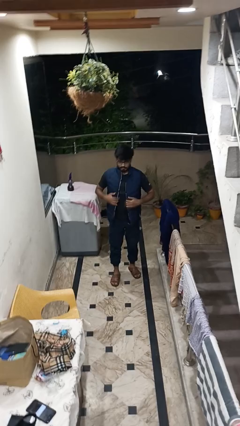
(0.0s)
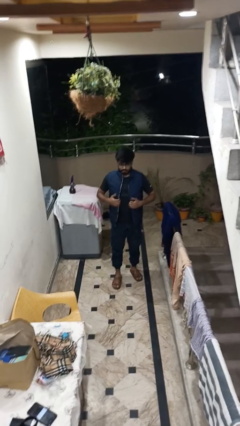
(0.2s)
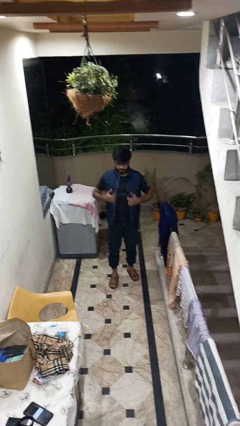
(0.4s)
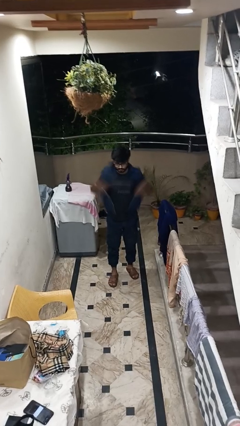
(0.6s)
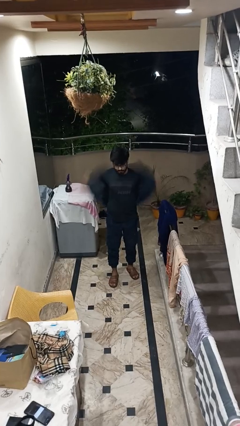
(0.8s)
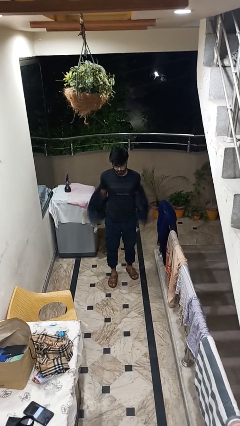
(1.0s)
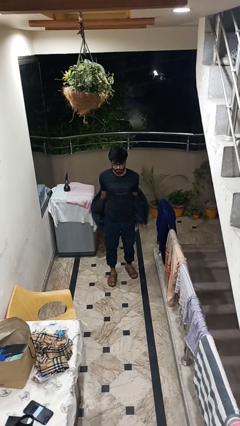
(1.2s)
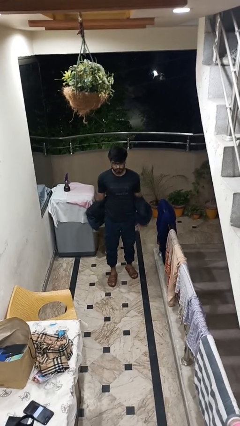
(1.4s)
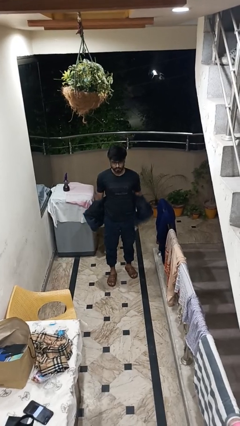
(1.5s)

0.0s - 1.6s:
person takes off jacket

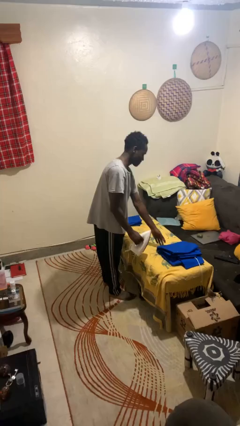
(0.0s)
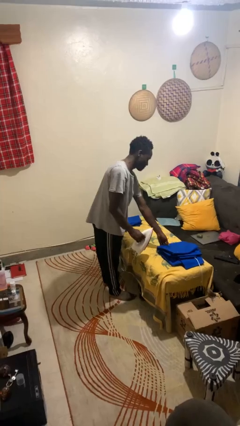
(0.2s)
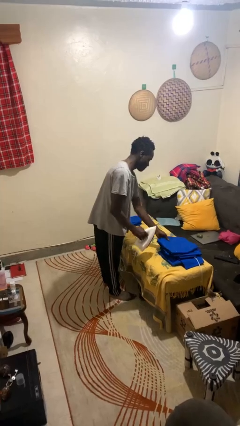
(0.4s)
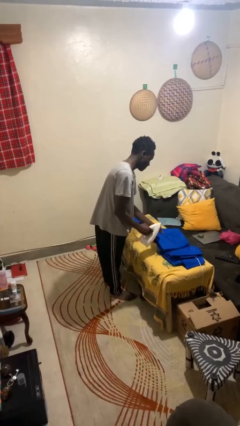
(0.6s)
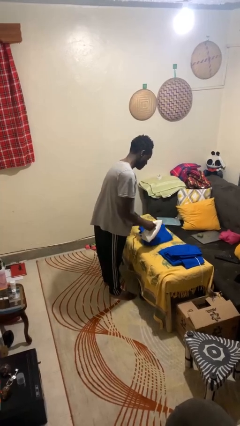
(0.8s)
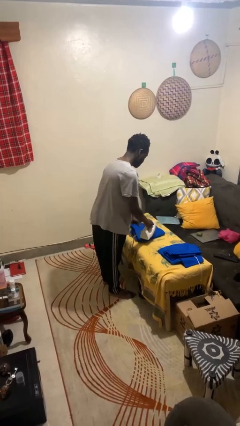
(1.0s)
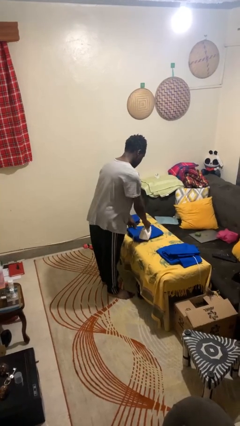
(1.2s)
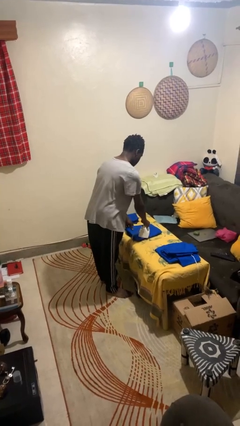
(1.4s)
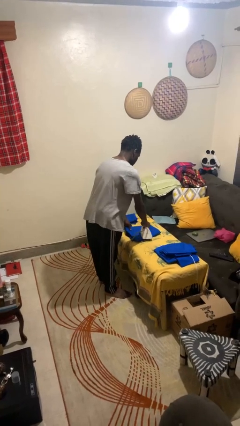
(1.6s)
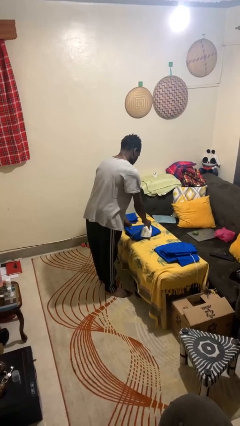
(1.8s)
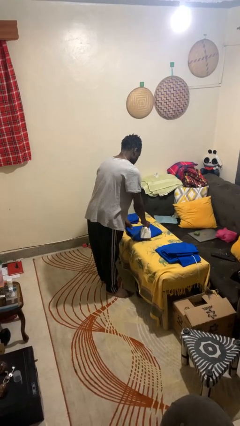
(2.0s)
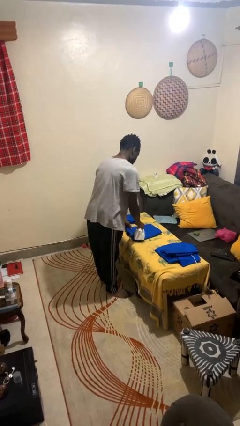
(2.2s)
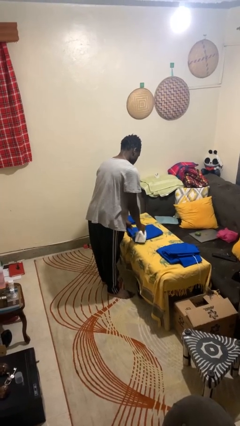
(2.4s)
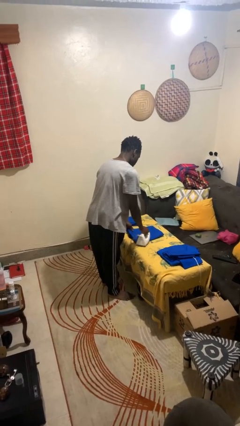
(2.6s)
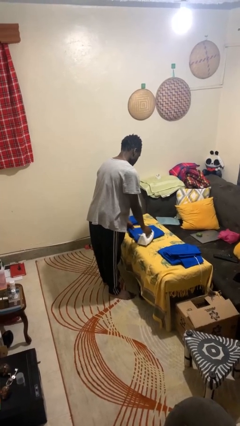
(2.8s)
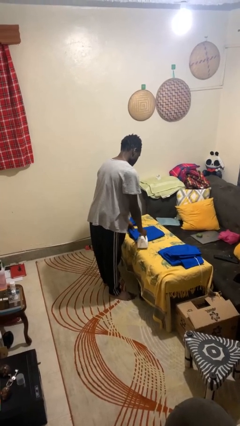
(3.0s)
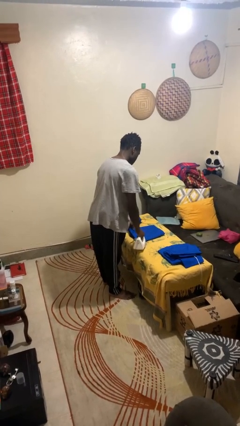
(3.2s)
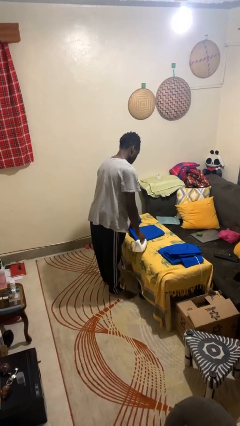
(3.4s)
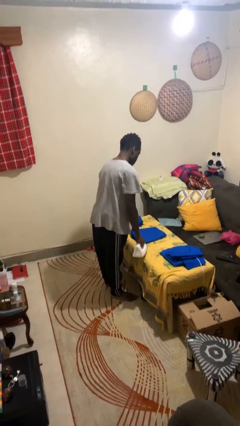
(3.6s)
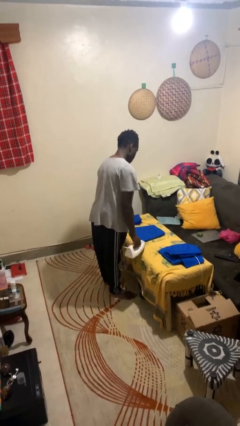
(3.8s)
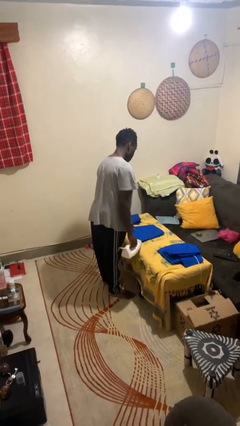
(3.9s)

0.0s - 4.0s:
person irons clothes

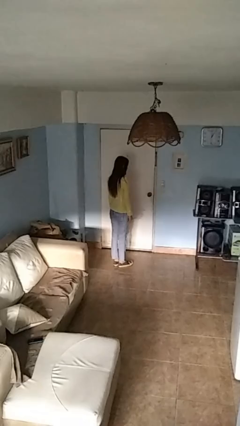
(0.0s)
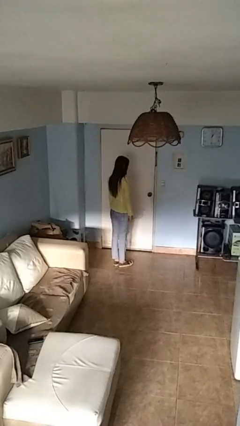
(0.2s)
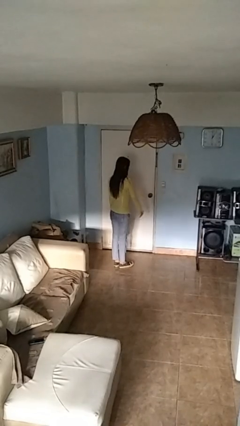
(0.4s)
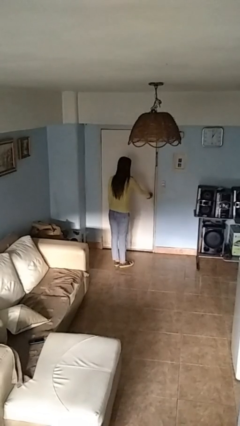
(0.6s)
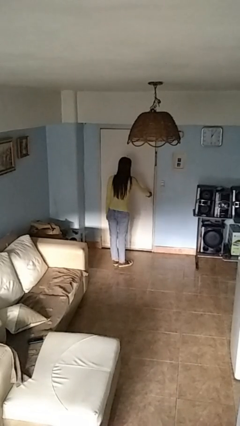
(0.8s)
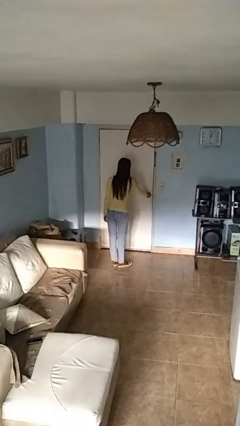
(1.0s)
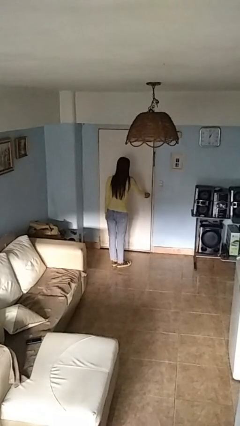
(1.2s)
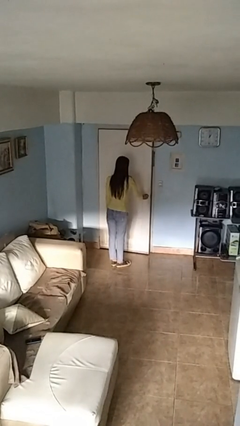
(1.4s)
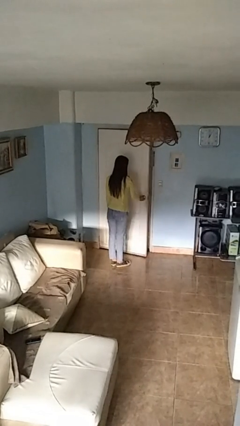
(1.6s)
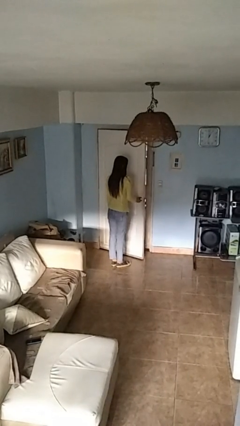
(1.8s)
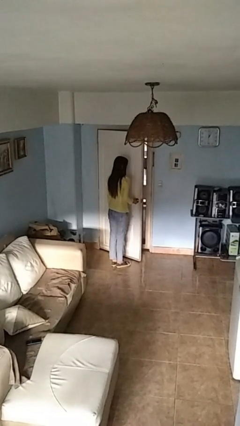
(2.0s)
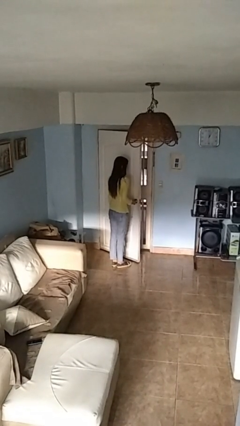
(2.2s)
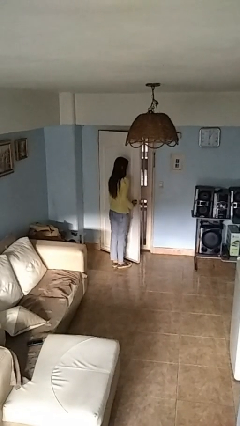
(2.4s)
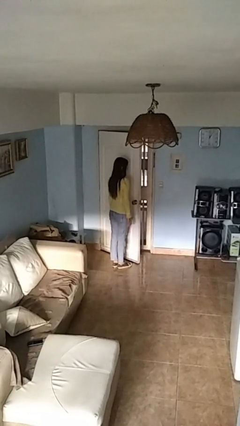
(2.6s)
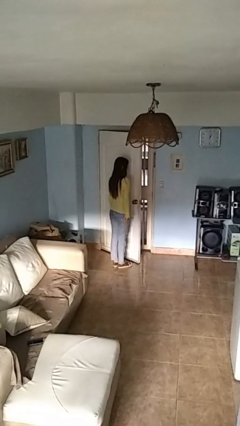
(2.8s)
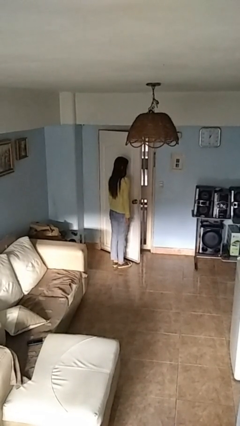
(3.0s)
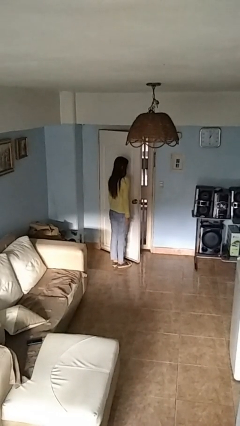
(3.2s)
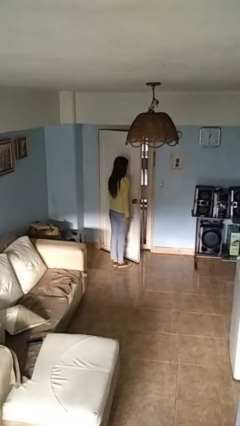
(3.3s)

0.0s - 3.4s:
person opens facility door

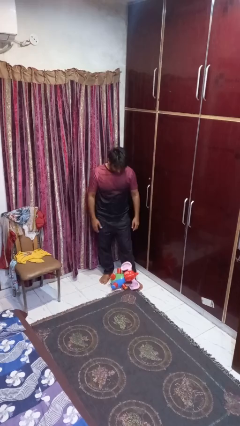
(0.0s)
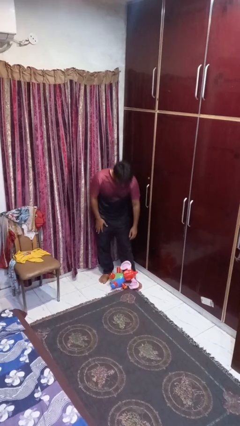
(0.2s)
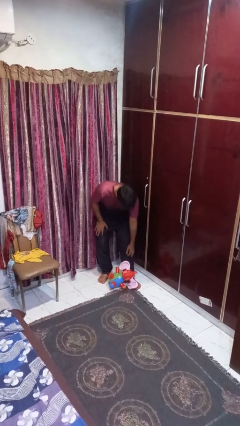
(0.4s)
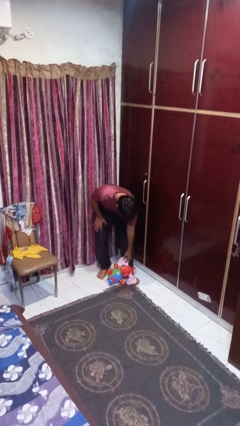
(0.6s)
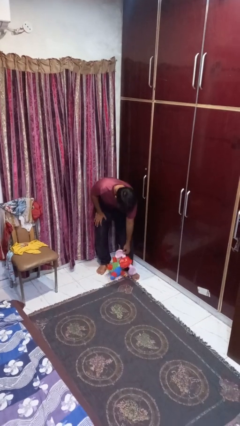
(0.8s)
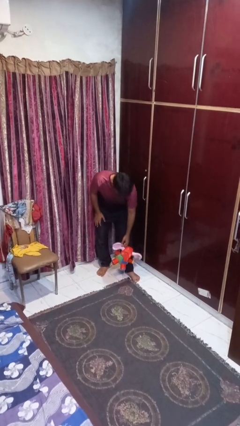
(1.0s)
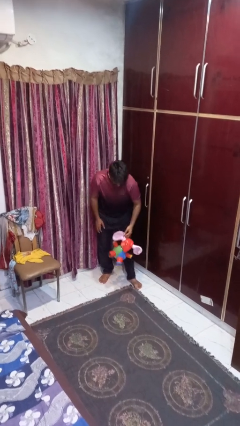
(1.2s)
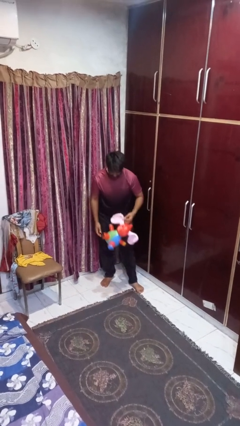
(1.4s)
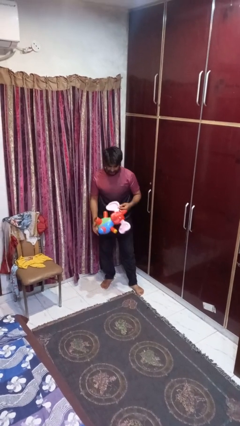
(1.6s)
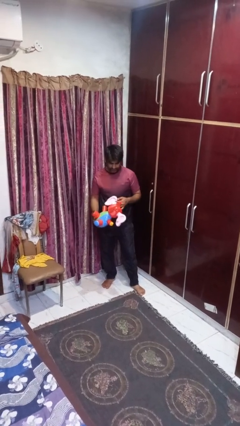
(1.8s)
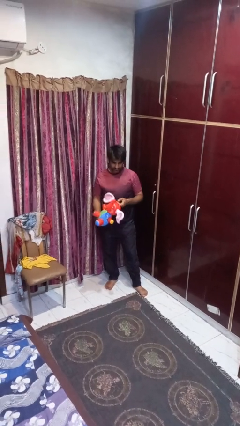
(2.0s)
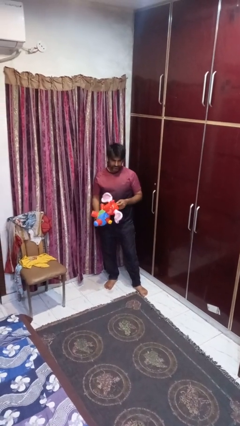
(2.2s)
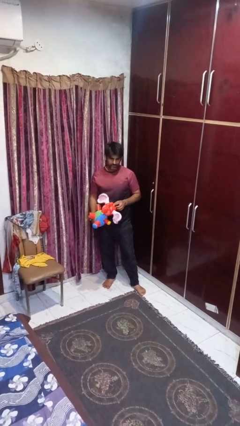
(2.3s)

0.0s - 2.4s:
person picks up object from floor

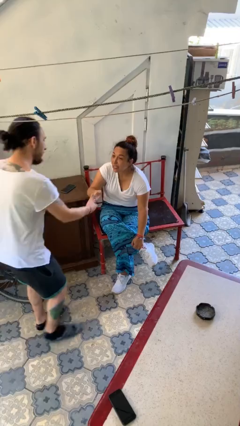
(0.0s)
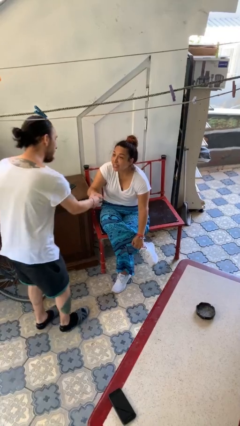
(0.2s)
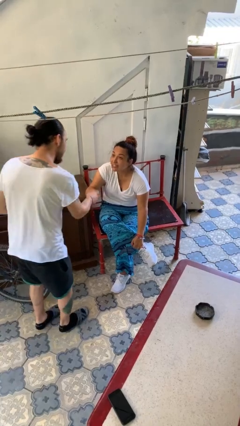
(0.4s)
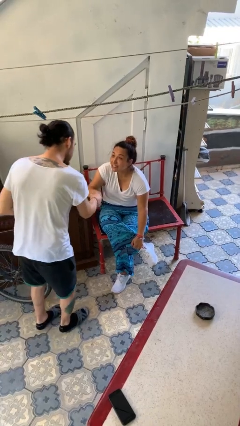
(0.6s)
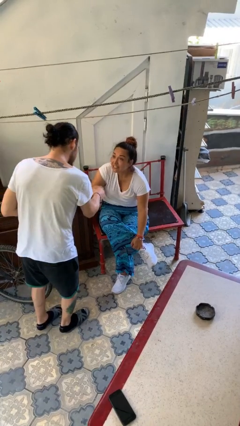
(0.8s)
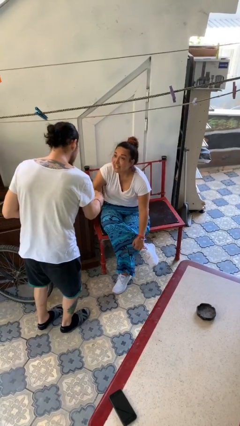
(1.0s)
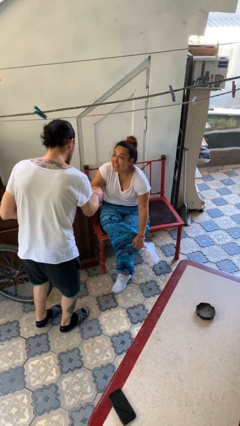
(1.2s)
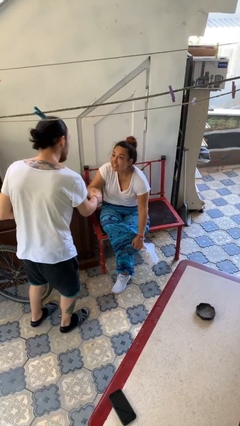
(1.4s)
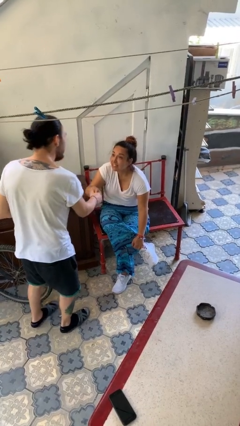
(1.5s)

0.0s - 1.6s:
person shakes hand

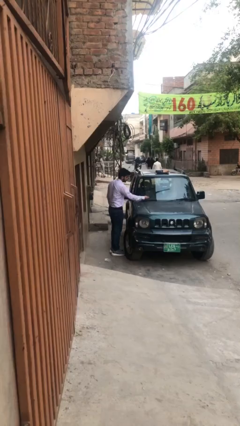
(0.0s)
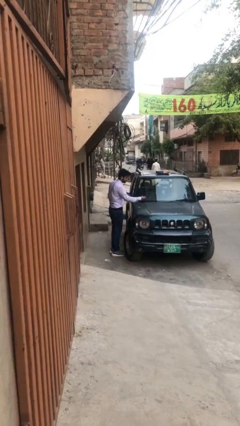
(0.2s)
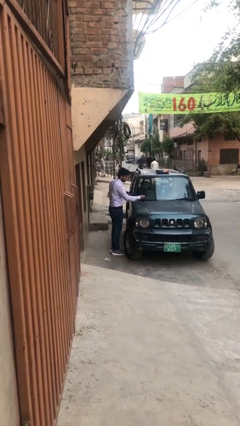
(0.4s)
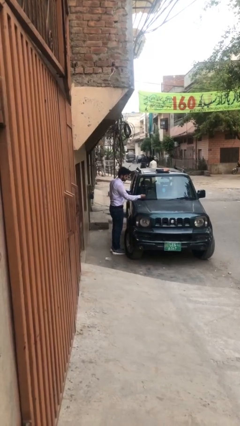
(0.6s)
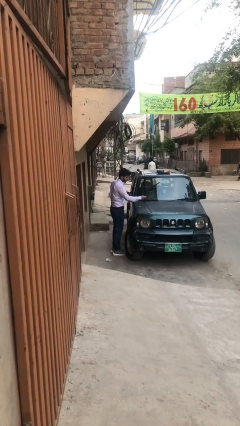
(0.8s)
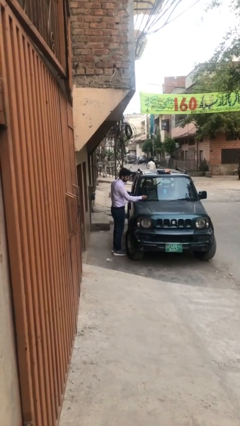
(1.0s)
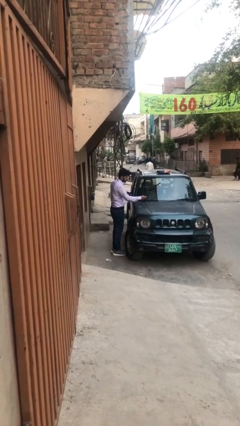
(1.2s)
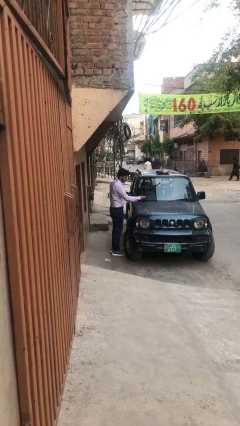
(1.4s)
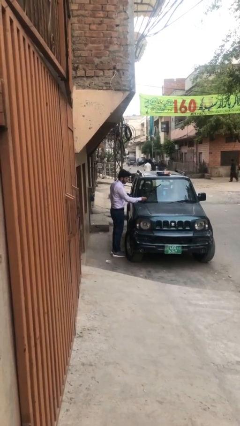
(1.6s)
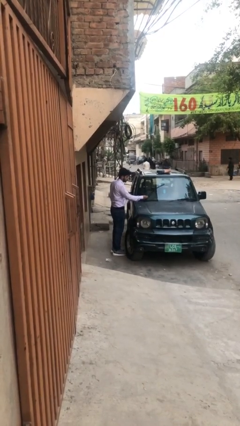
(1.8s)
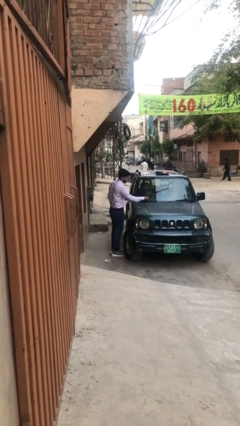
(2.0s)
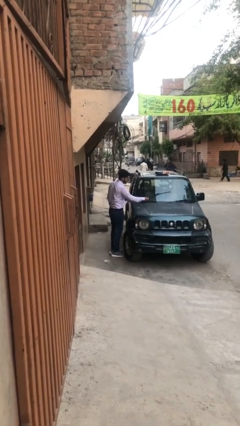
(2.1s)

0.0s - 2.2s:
person flips up car wipers

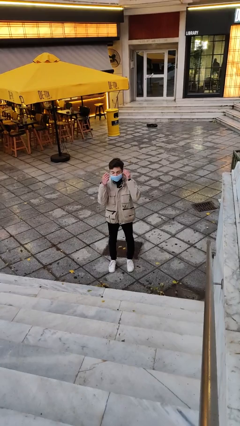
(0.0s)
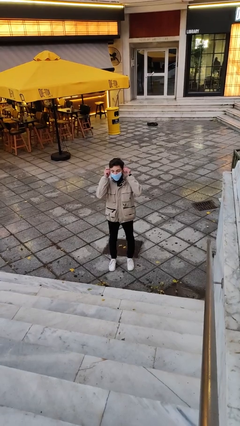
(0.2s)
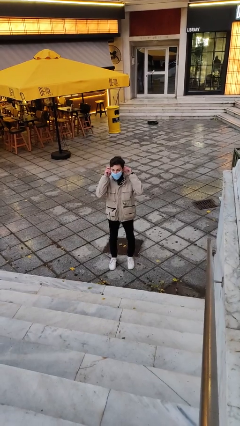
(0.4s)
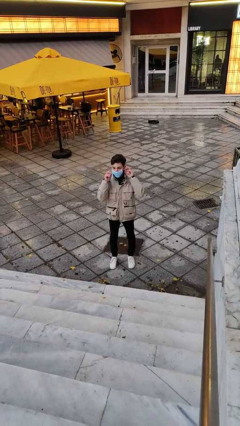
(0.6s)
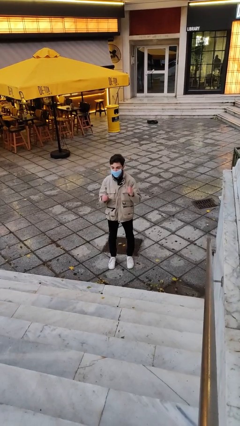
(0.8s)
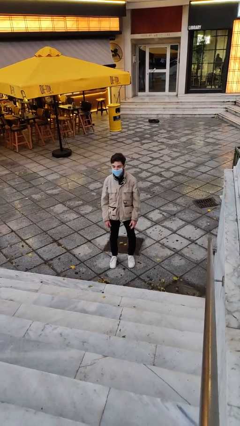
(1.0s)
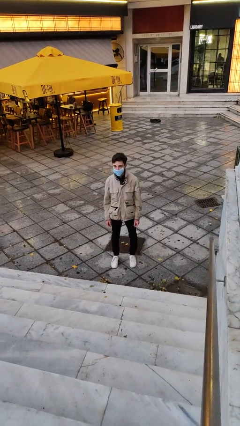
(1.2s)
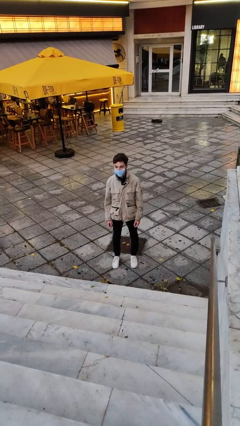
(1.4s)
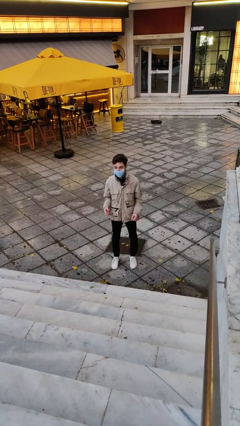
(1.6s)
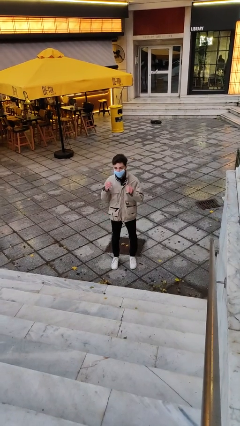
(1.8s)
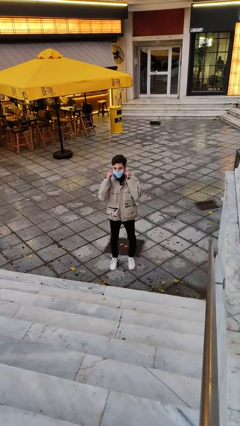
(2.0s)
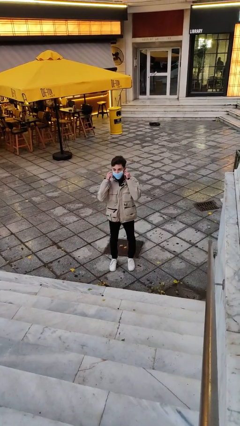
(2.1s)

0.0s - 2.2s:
person puts on facemask
